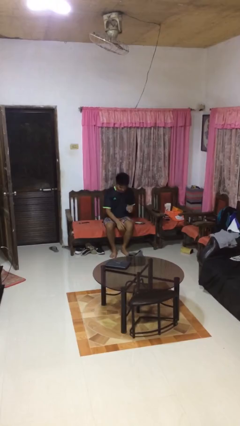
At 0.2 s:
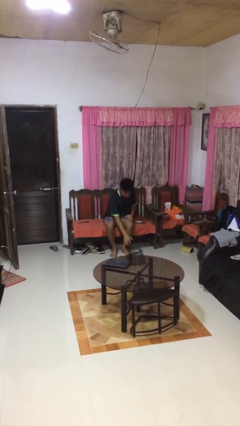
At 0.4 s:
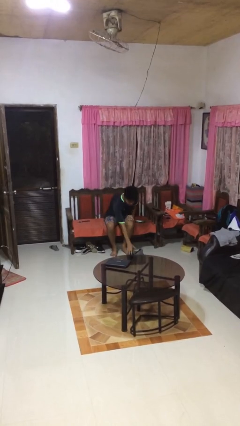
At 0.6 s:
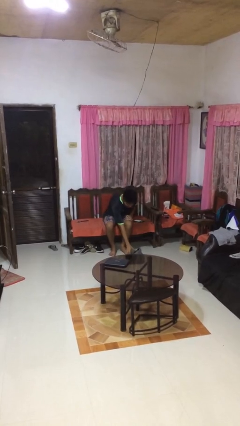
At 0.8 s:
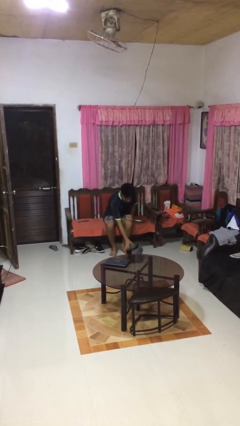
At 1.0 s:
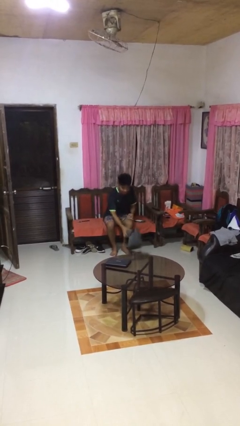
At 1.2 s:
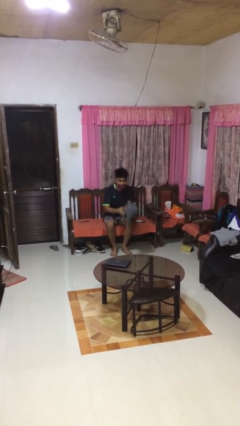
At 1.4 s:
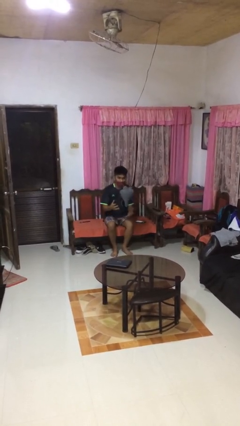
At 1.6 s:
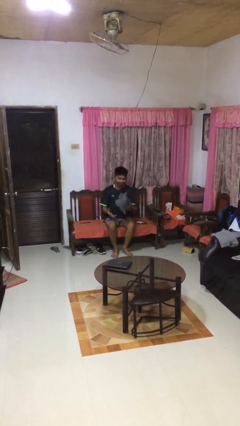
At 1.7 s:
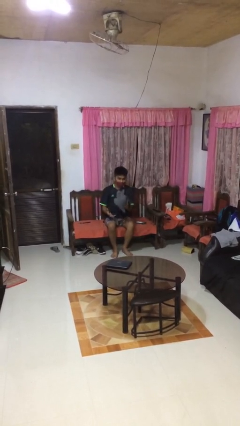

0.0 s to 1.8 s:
person picks up object from floor

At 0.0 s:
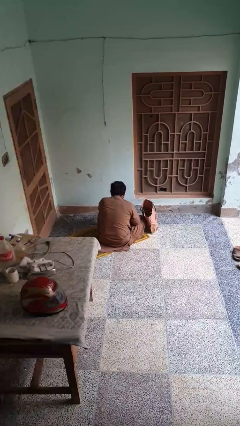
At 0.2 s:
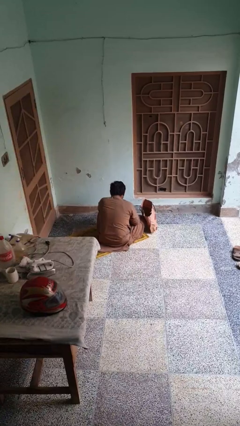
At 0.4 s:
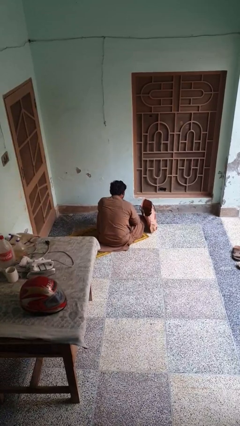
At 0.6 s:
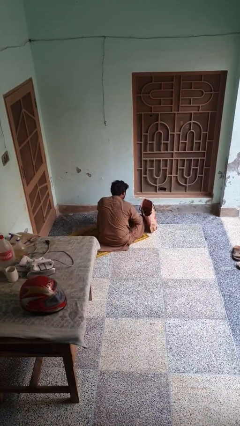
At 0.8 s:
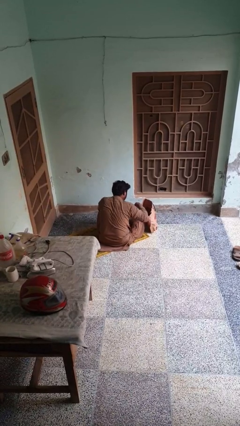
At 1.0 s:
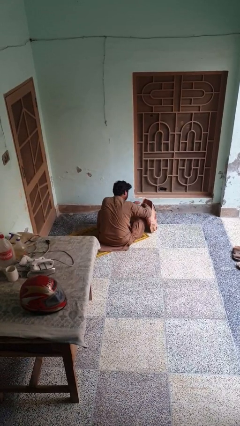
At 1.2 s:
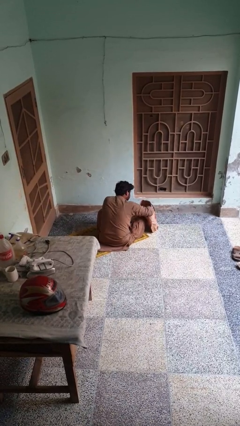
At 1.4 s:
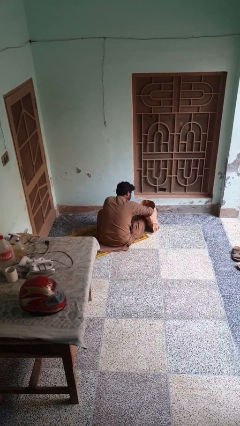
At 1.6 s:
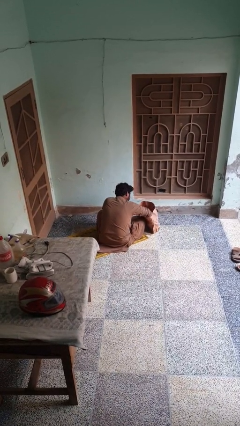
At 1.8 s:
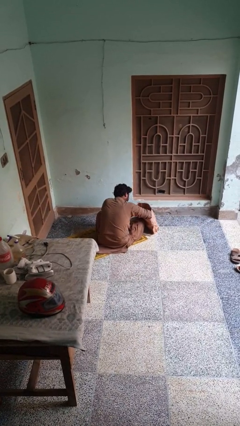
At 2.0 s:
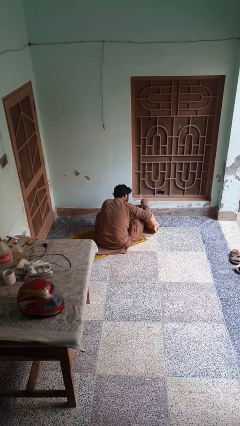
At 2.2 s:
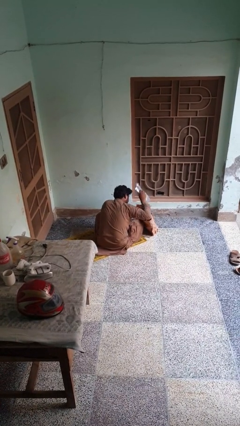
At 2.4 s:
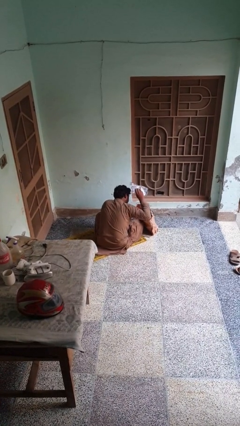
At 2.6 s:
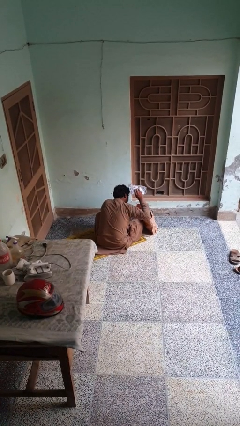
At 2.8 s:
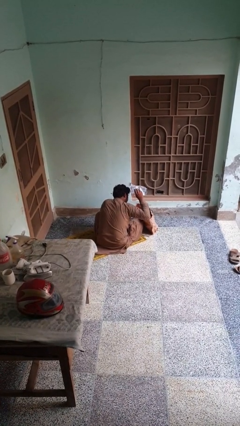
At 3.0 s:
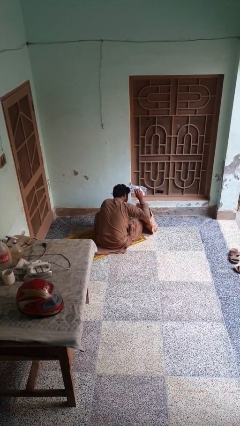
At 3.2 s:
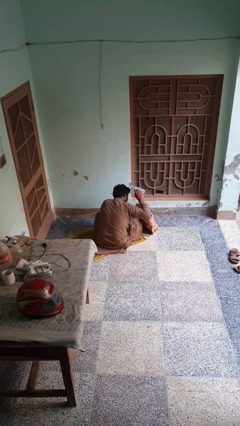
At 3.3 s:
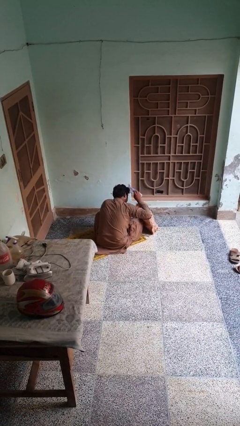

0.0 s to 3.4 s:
person searches in bag

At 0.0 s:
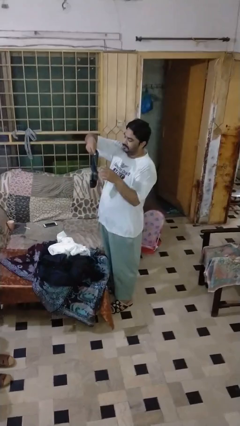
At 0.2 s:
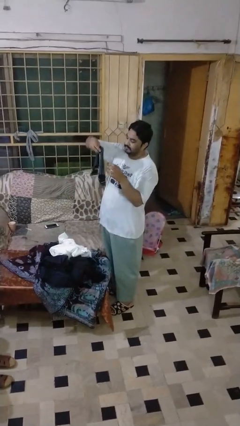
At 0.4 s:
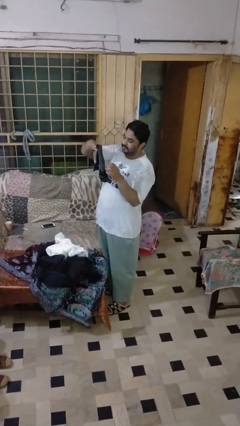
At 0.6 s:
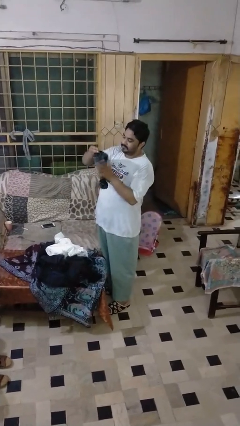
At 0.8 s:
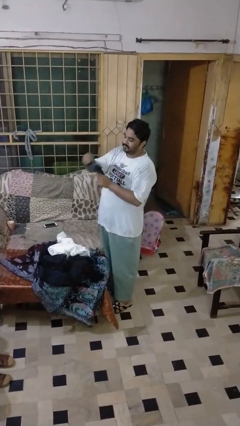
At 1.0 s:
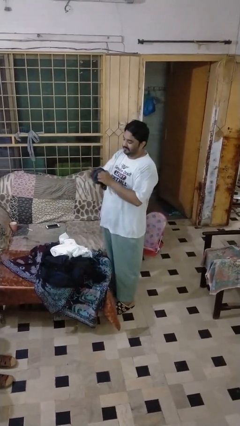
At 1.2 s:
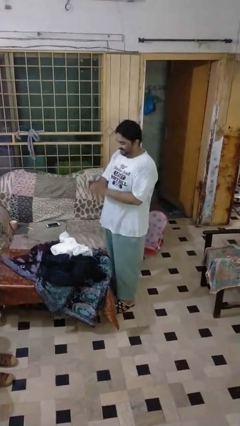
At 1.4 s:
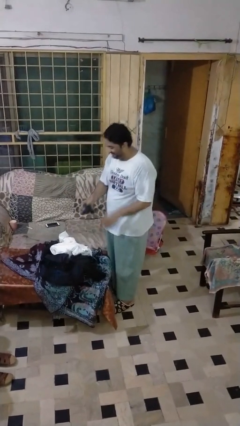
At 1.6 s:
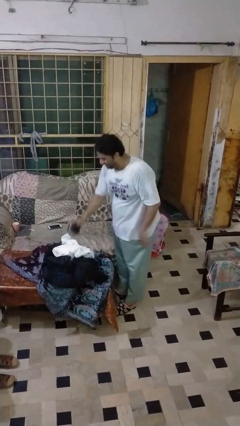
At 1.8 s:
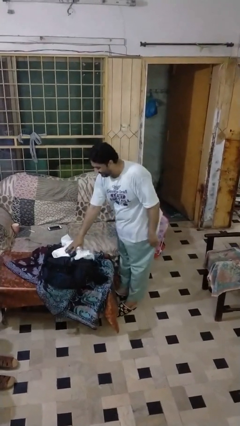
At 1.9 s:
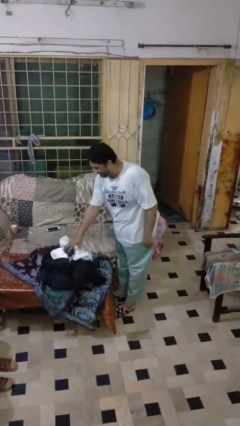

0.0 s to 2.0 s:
person folds socks

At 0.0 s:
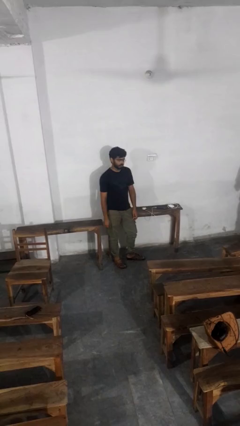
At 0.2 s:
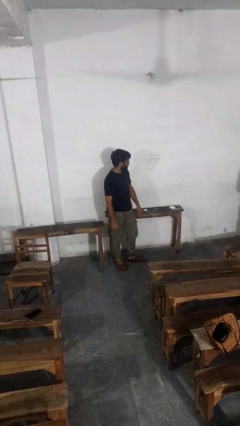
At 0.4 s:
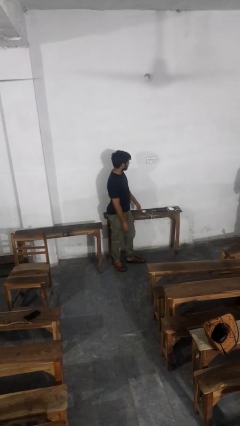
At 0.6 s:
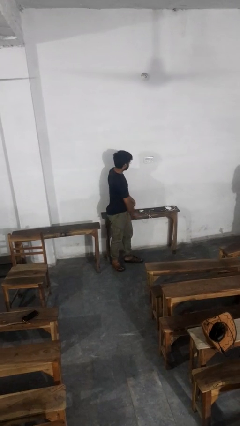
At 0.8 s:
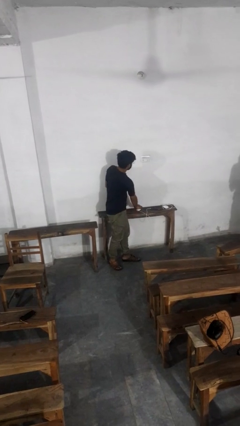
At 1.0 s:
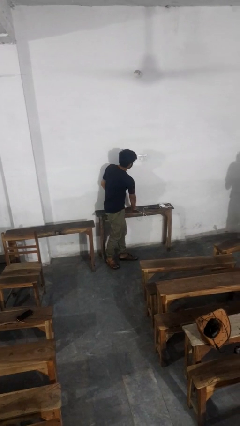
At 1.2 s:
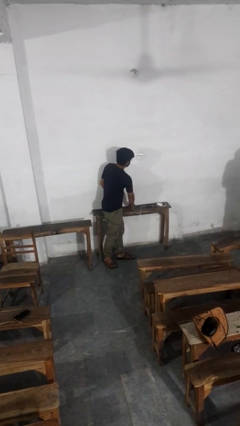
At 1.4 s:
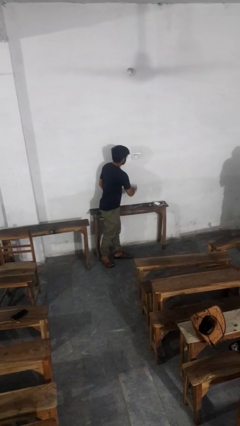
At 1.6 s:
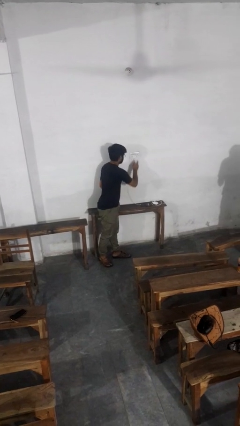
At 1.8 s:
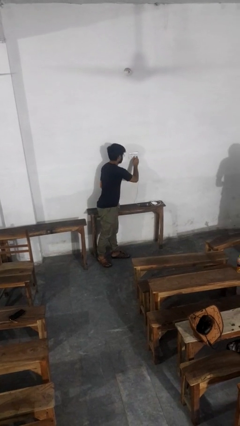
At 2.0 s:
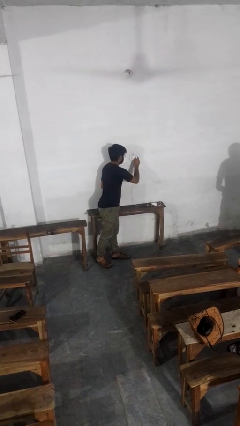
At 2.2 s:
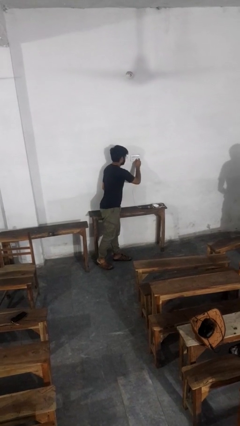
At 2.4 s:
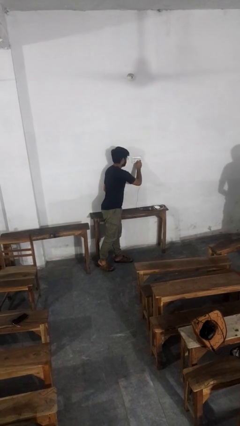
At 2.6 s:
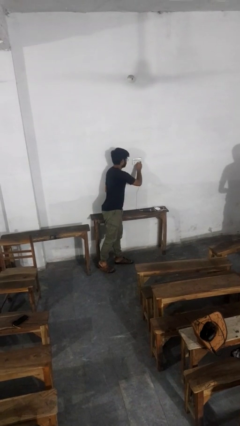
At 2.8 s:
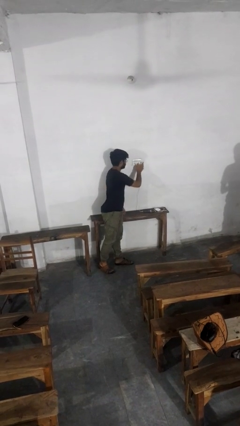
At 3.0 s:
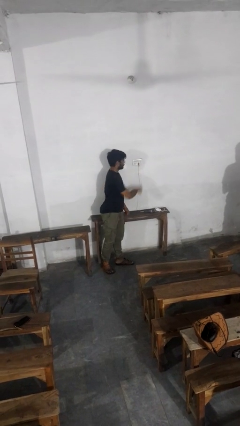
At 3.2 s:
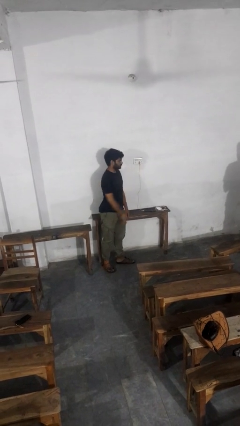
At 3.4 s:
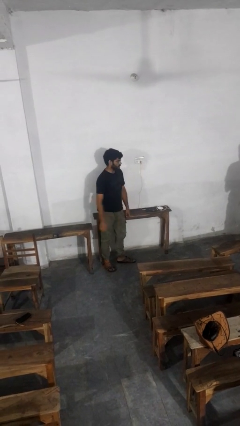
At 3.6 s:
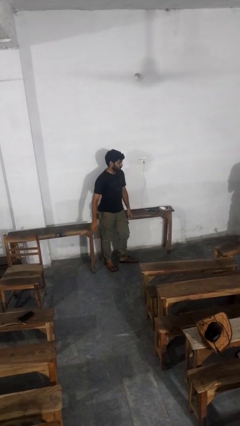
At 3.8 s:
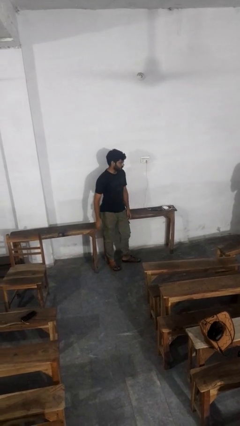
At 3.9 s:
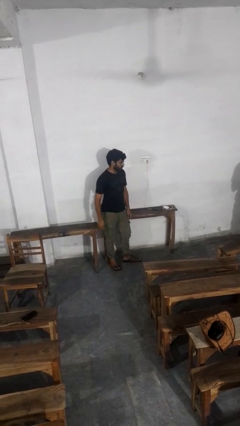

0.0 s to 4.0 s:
person plugs into electrical socket

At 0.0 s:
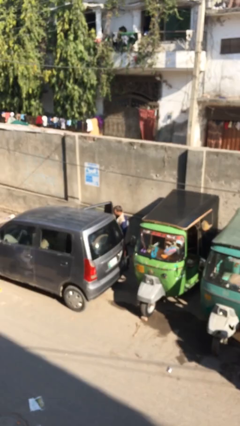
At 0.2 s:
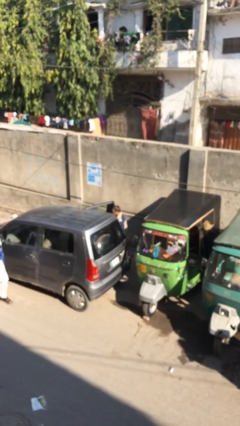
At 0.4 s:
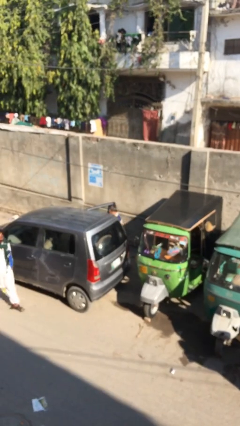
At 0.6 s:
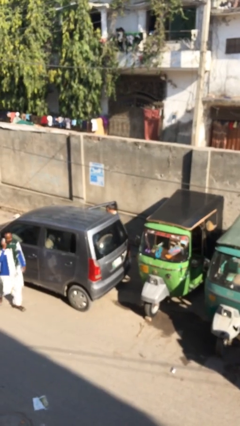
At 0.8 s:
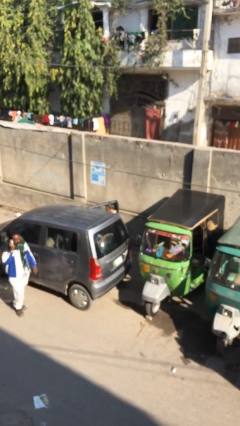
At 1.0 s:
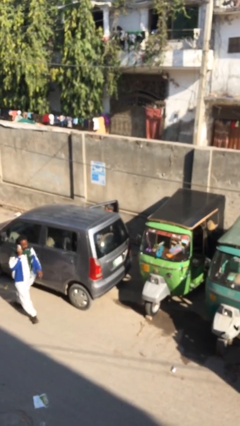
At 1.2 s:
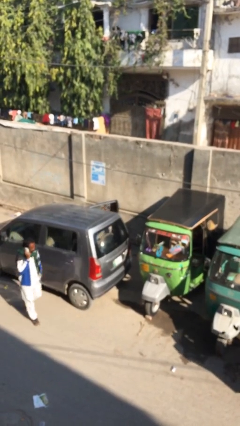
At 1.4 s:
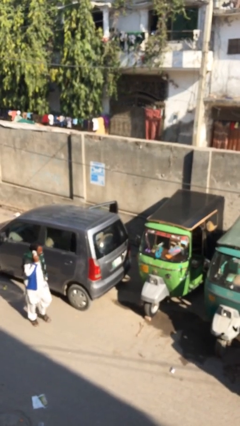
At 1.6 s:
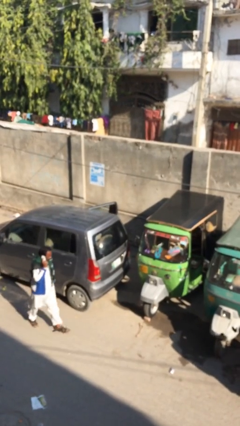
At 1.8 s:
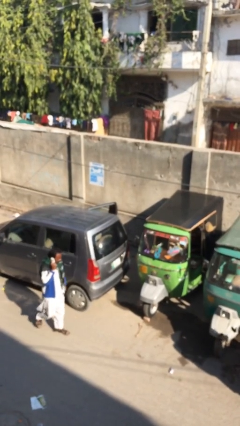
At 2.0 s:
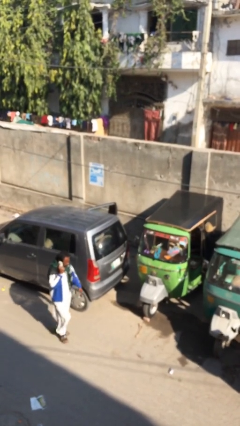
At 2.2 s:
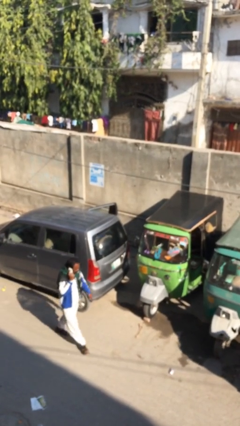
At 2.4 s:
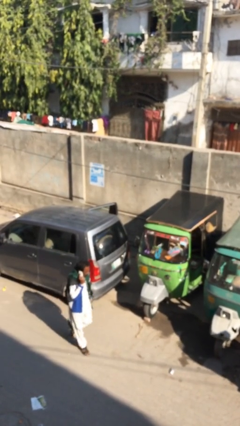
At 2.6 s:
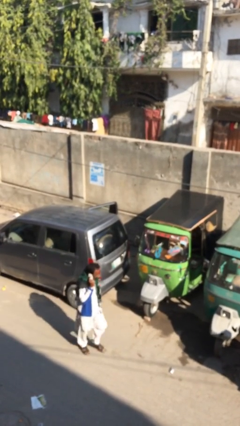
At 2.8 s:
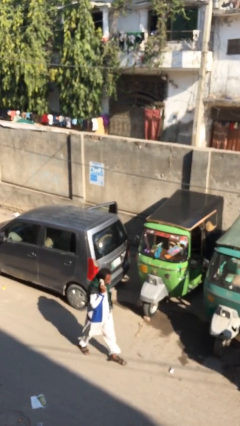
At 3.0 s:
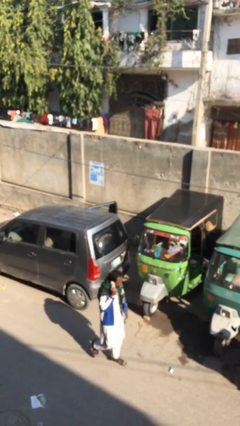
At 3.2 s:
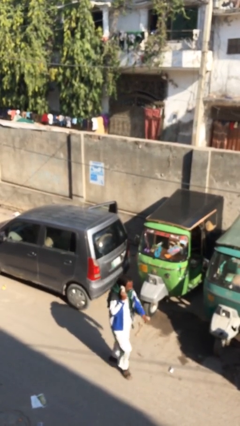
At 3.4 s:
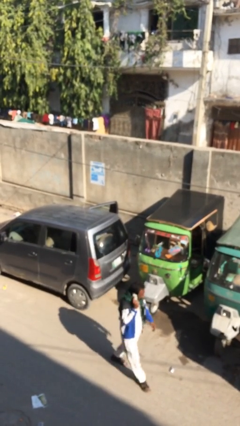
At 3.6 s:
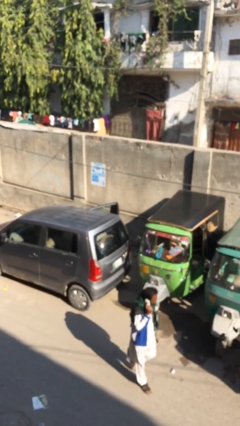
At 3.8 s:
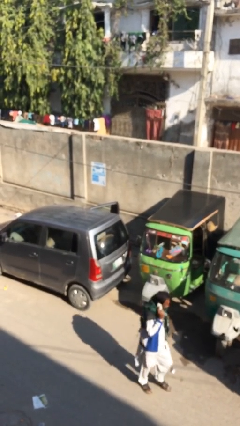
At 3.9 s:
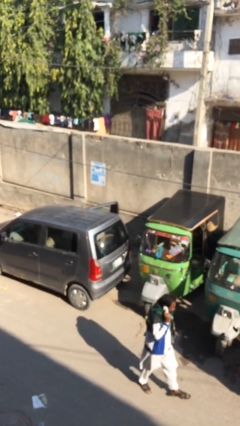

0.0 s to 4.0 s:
person enters car

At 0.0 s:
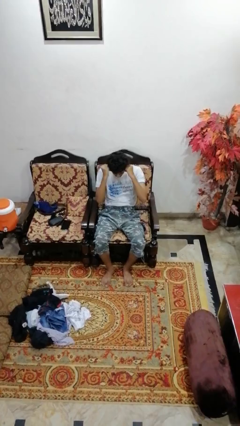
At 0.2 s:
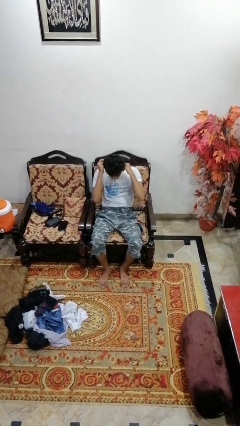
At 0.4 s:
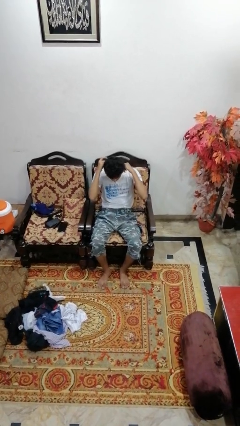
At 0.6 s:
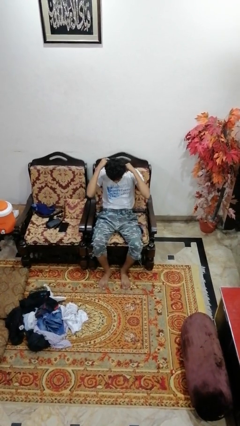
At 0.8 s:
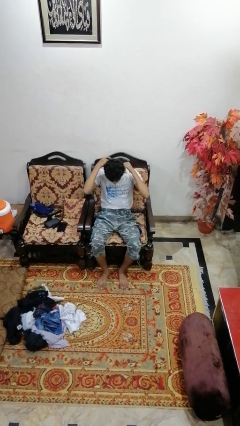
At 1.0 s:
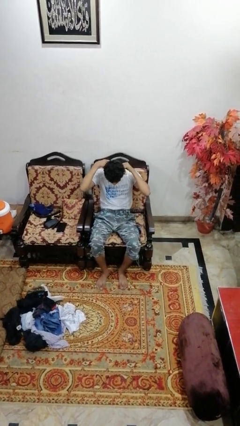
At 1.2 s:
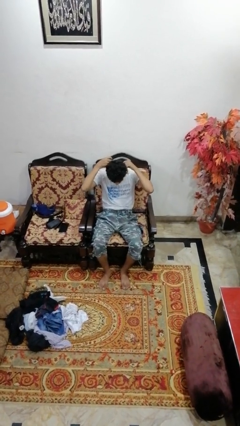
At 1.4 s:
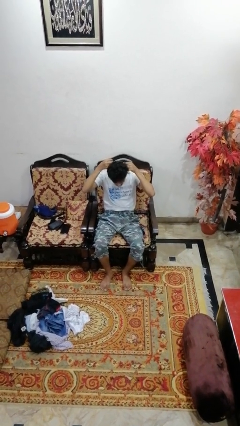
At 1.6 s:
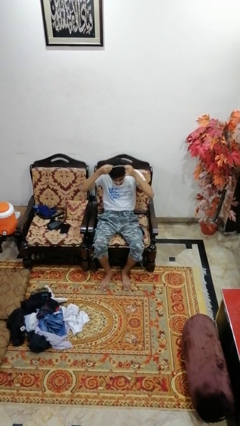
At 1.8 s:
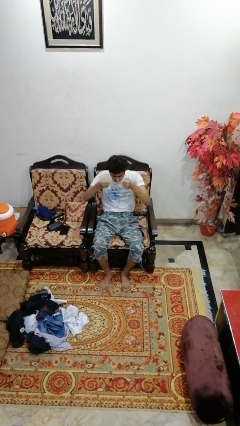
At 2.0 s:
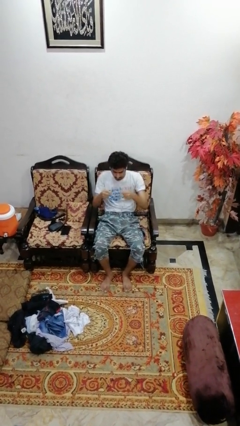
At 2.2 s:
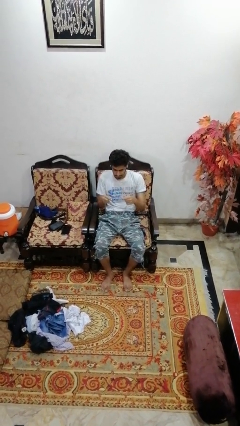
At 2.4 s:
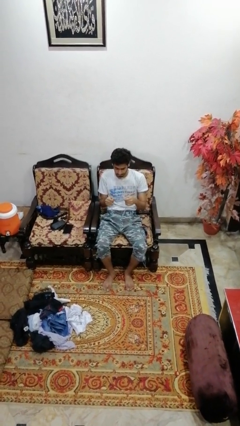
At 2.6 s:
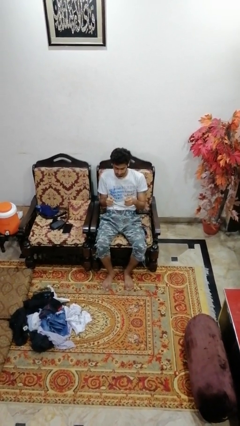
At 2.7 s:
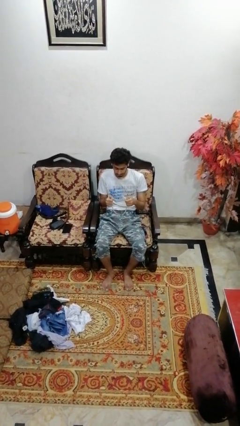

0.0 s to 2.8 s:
person takes off necklace
